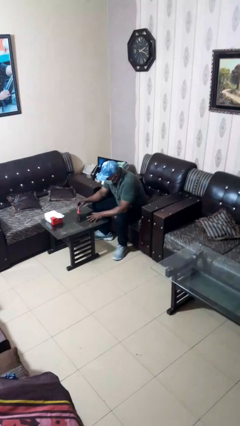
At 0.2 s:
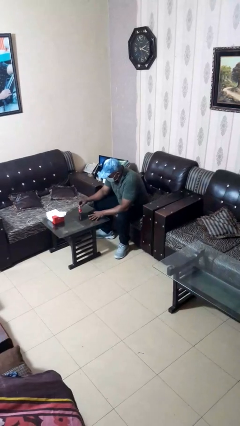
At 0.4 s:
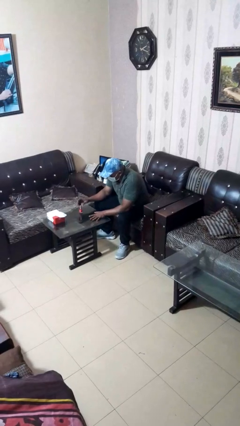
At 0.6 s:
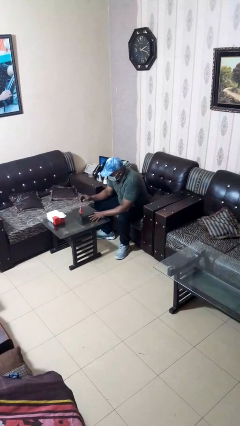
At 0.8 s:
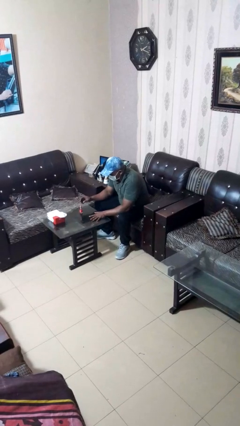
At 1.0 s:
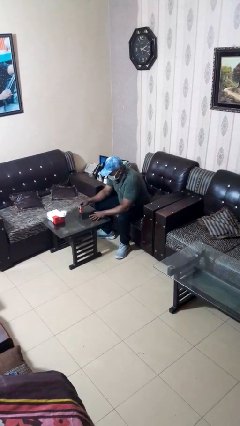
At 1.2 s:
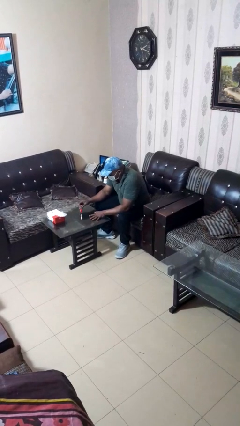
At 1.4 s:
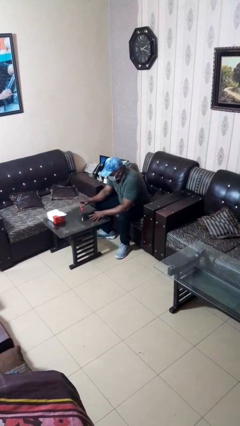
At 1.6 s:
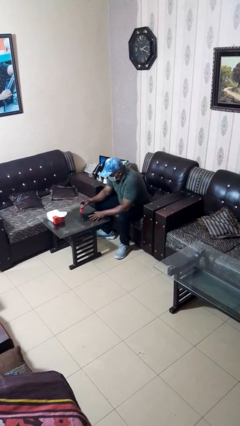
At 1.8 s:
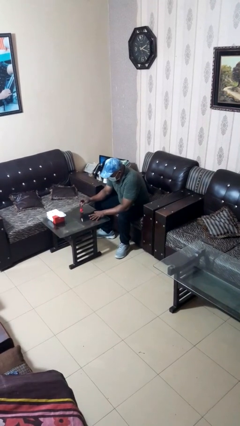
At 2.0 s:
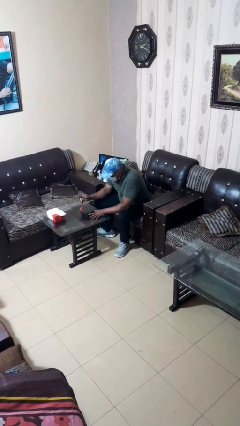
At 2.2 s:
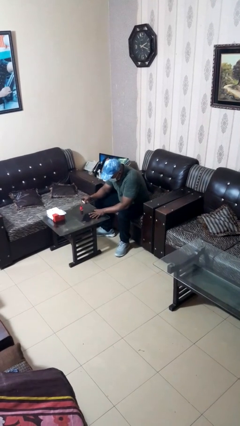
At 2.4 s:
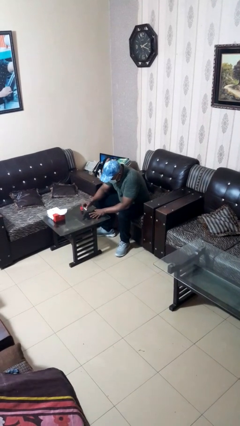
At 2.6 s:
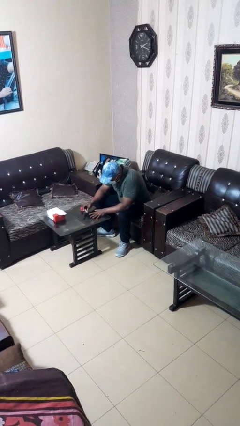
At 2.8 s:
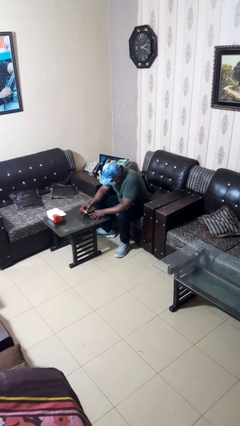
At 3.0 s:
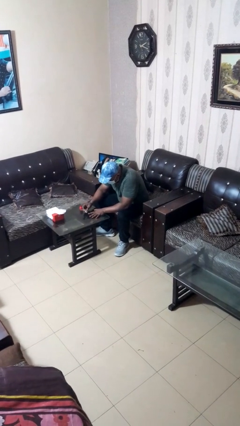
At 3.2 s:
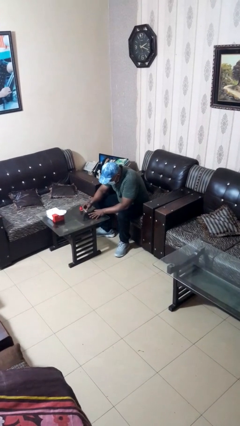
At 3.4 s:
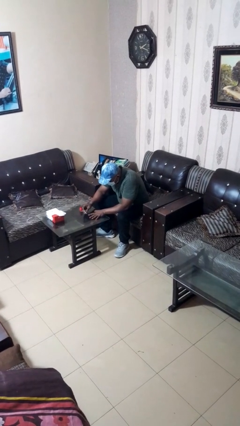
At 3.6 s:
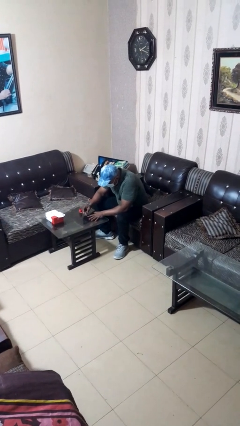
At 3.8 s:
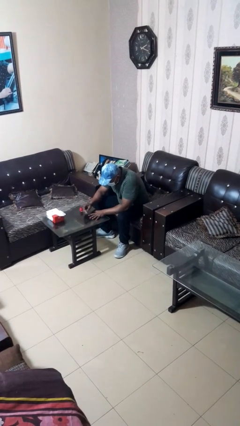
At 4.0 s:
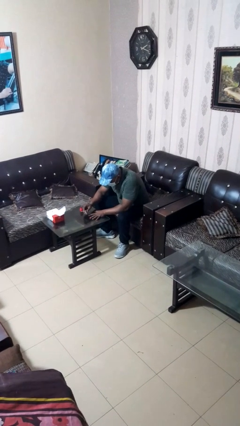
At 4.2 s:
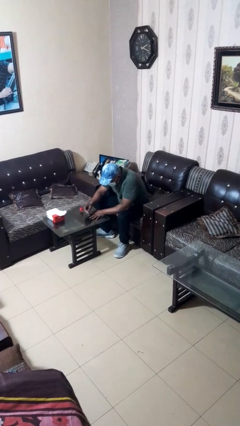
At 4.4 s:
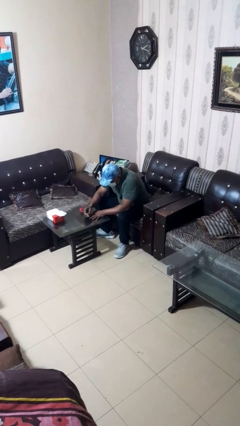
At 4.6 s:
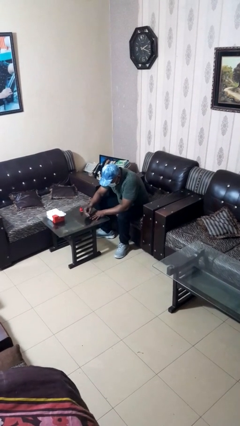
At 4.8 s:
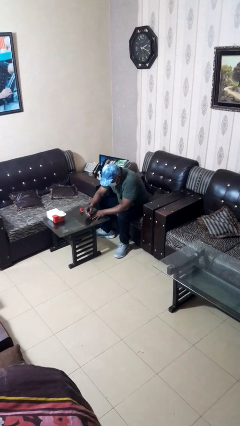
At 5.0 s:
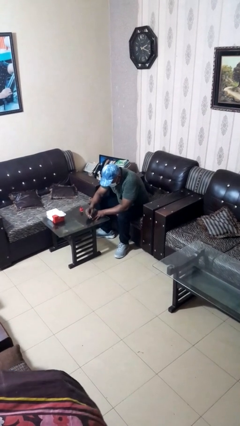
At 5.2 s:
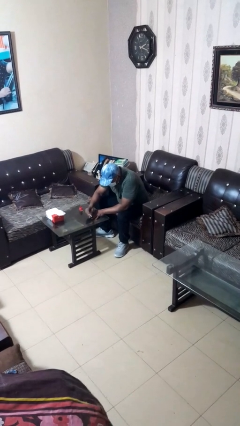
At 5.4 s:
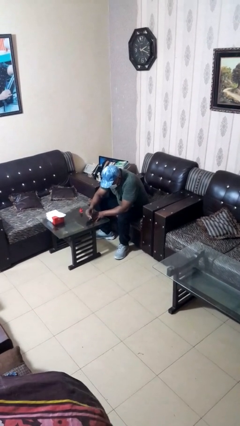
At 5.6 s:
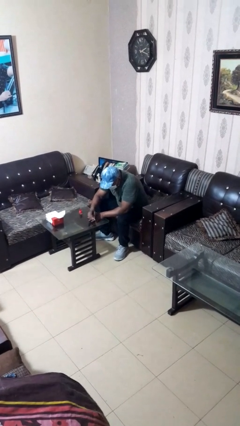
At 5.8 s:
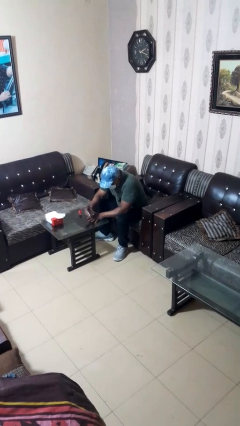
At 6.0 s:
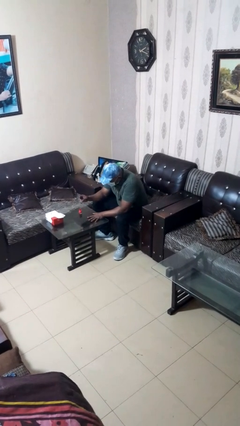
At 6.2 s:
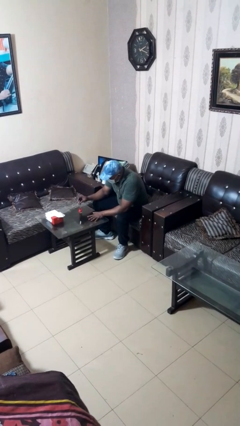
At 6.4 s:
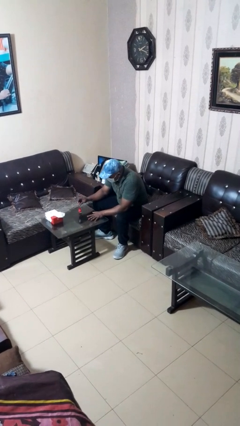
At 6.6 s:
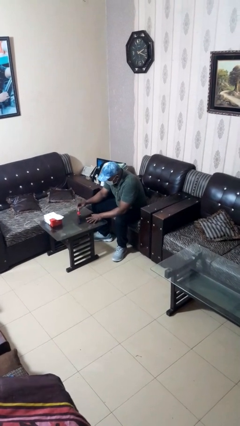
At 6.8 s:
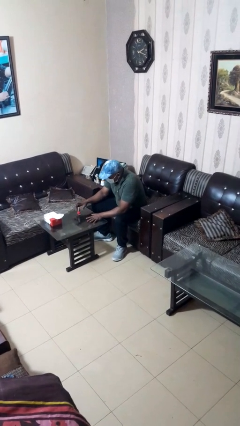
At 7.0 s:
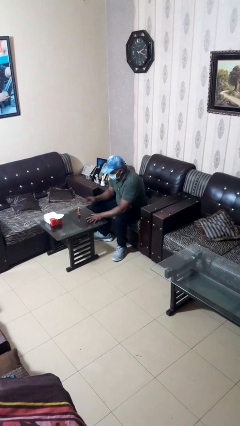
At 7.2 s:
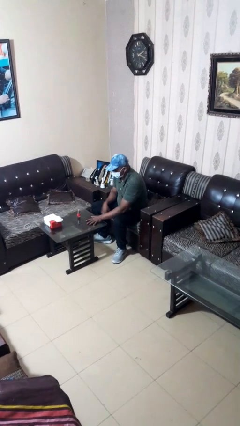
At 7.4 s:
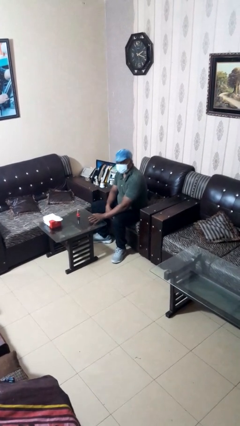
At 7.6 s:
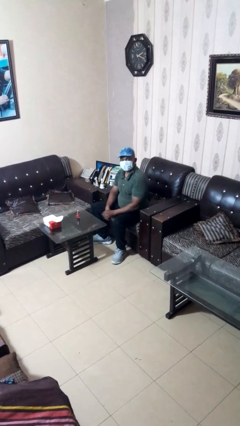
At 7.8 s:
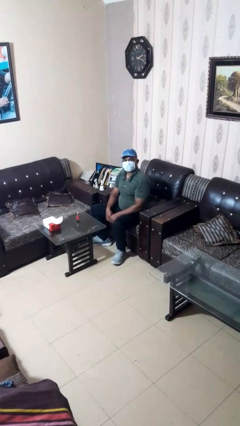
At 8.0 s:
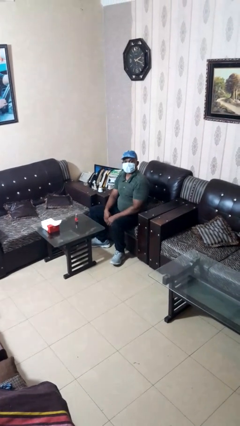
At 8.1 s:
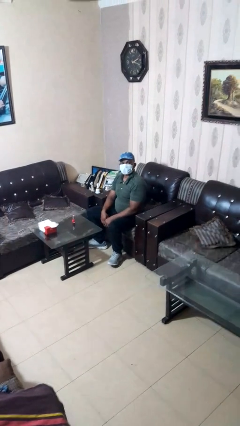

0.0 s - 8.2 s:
person paints fingernails

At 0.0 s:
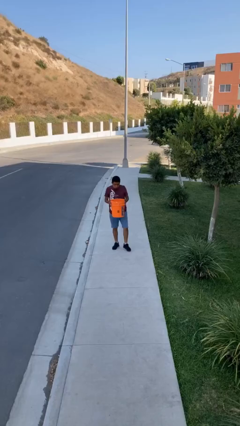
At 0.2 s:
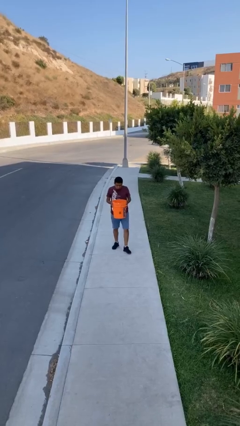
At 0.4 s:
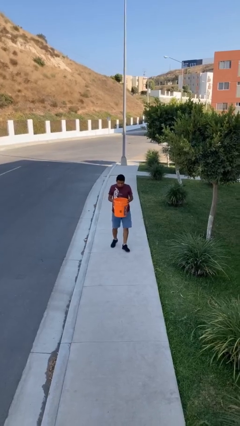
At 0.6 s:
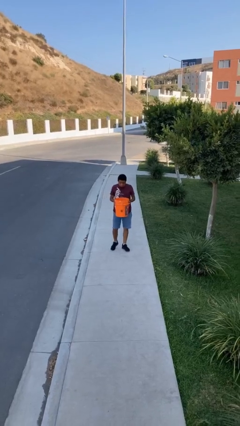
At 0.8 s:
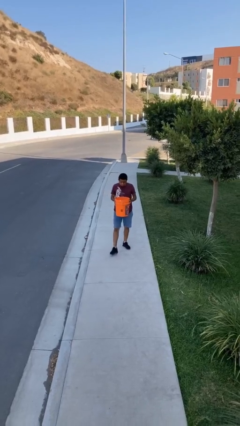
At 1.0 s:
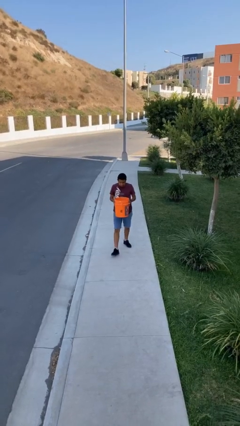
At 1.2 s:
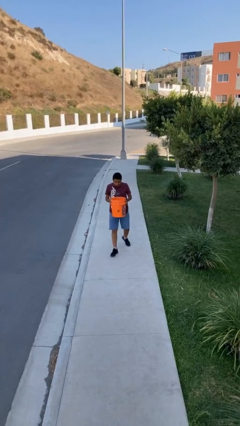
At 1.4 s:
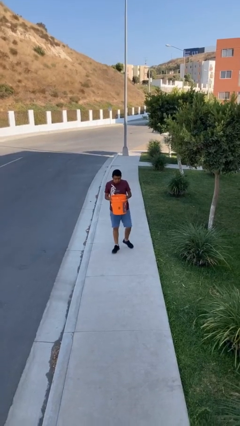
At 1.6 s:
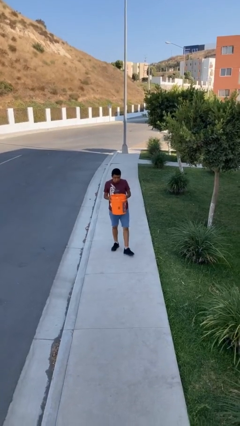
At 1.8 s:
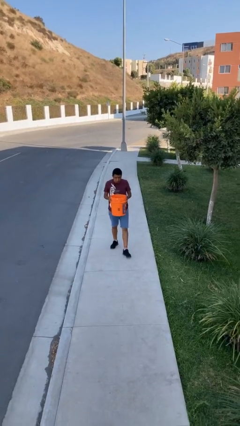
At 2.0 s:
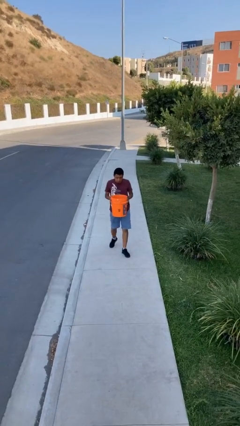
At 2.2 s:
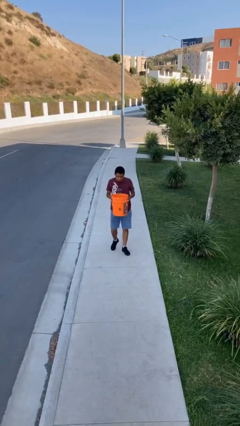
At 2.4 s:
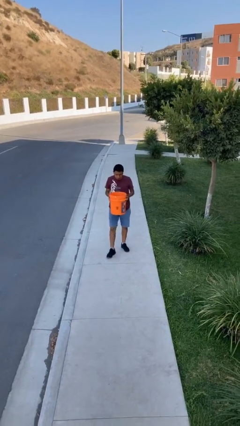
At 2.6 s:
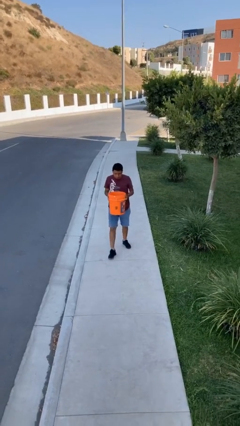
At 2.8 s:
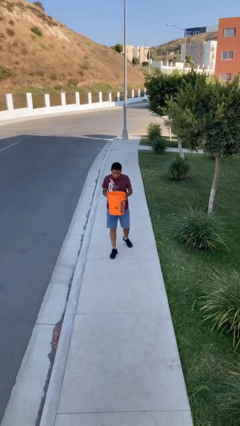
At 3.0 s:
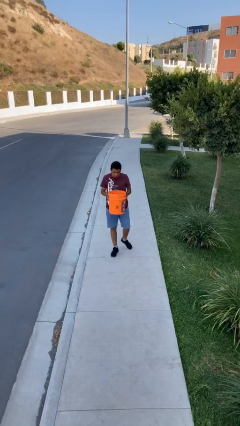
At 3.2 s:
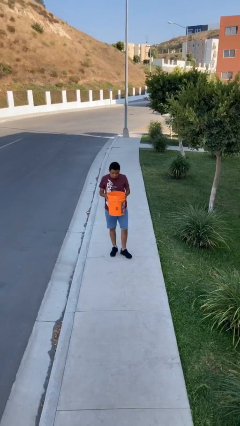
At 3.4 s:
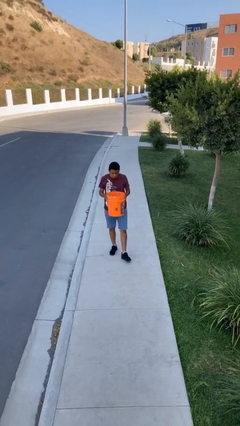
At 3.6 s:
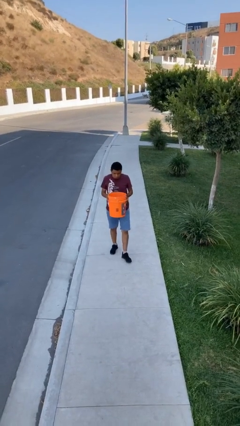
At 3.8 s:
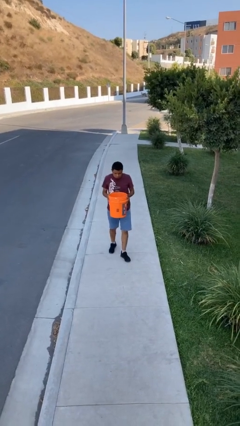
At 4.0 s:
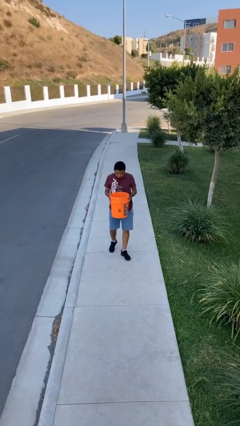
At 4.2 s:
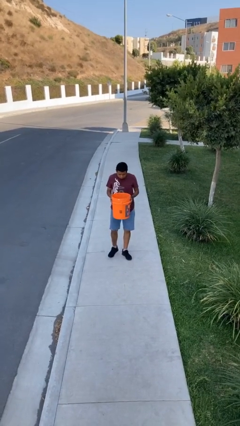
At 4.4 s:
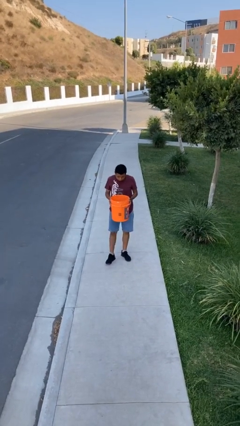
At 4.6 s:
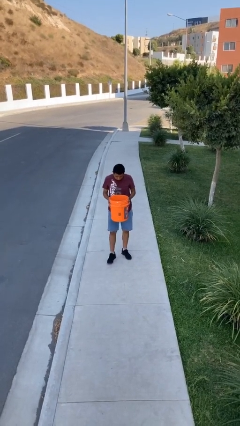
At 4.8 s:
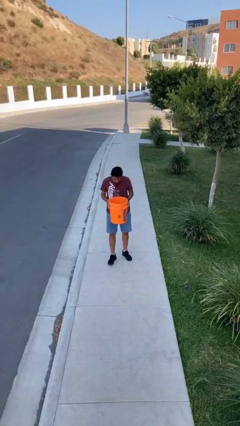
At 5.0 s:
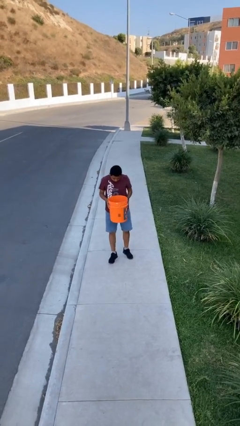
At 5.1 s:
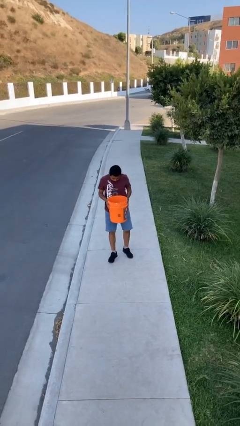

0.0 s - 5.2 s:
person carries heavy object

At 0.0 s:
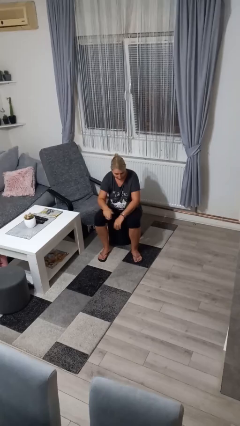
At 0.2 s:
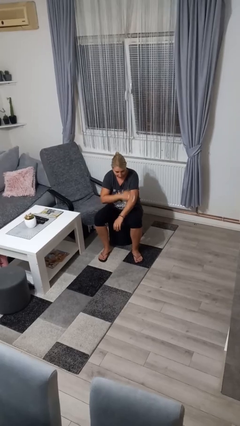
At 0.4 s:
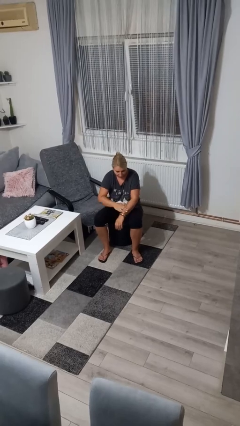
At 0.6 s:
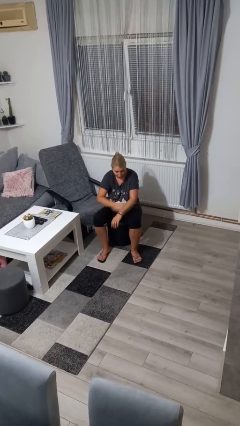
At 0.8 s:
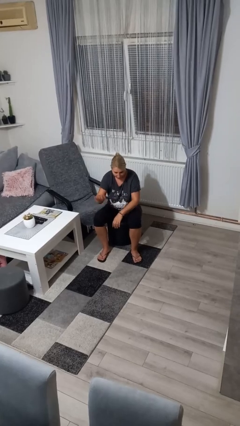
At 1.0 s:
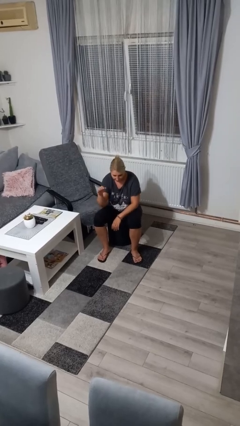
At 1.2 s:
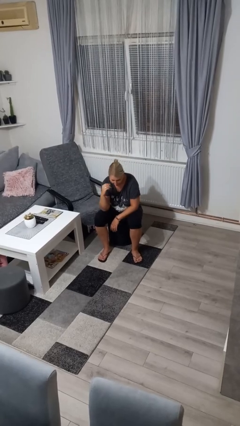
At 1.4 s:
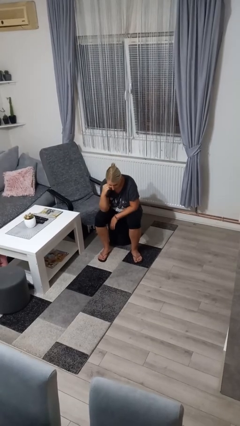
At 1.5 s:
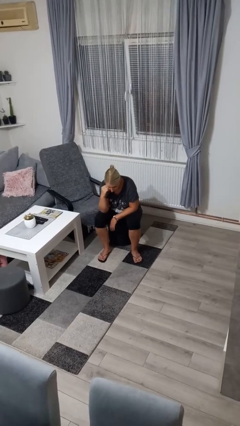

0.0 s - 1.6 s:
person swats bug

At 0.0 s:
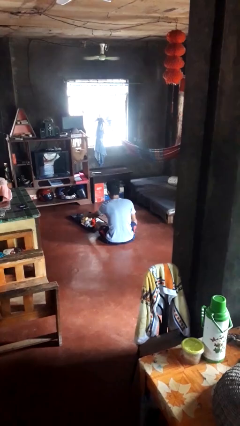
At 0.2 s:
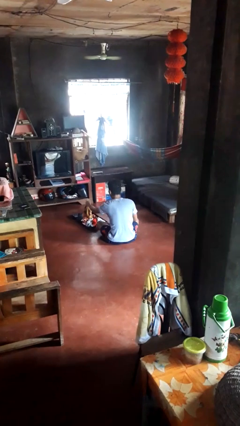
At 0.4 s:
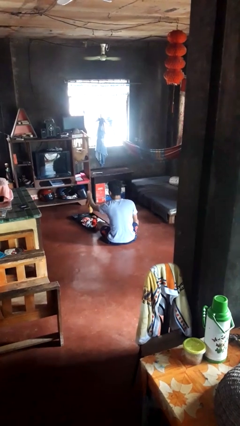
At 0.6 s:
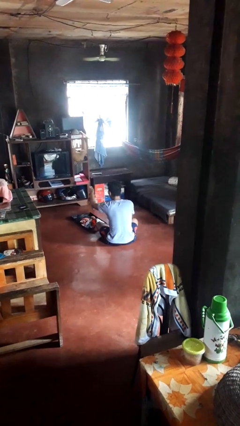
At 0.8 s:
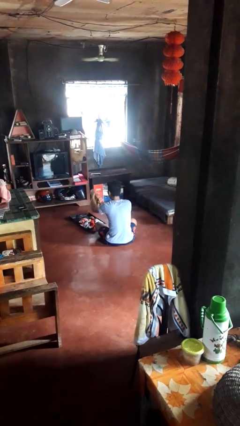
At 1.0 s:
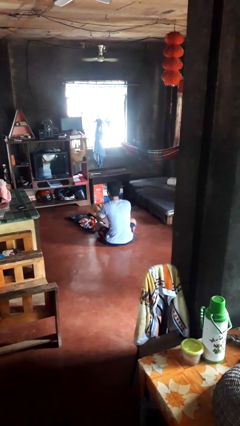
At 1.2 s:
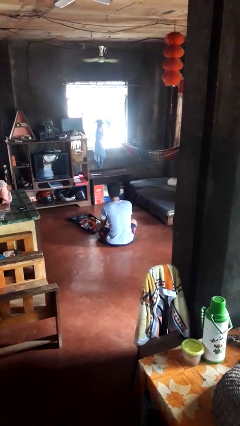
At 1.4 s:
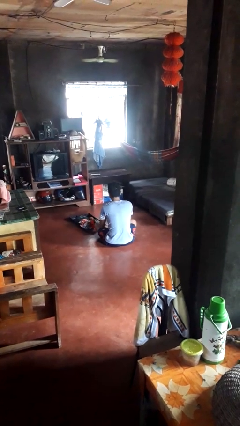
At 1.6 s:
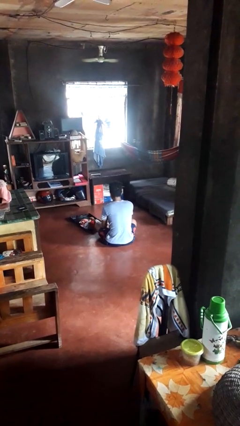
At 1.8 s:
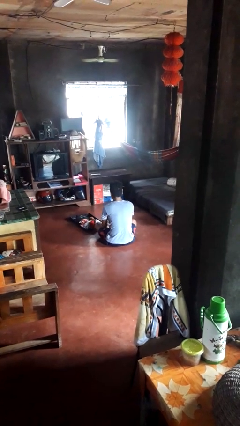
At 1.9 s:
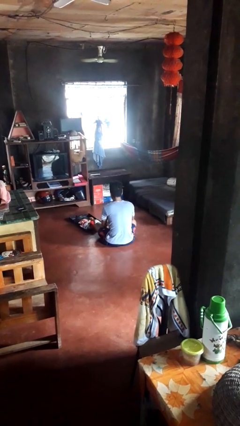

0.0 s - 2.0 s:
person unloads clothes from suitcase

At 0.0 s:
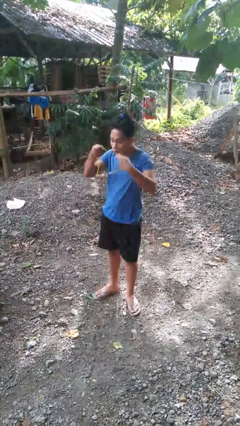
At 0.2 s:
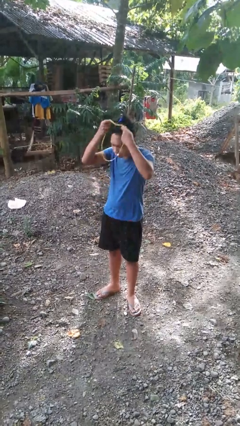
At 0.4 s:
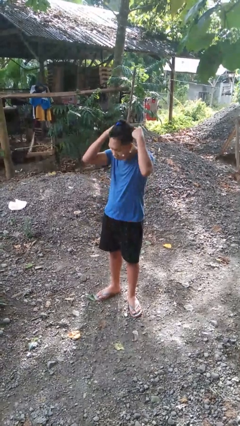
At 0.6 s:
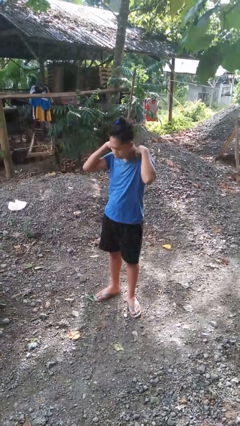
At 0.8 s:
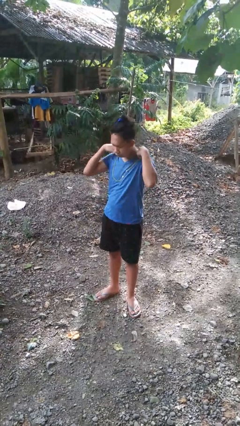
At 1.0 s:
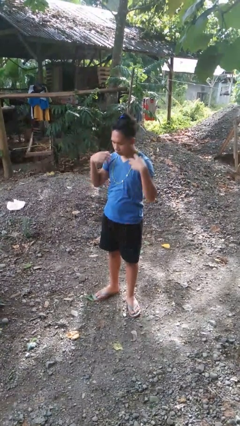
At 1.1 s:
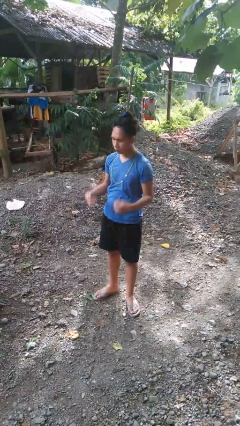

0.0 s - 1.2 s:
person puts on necklace
